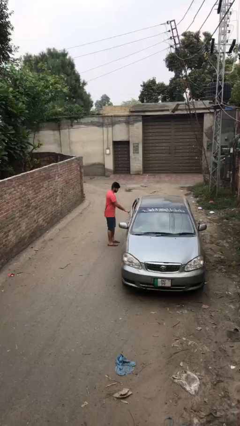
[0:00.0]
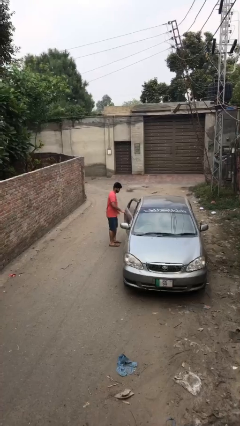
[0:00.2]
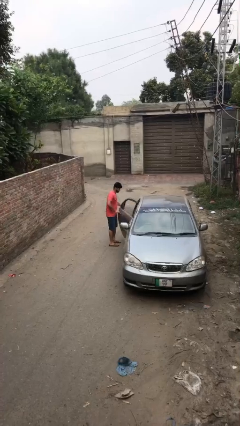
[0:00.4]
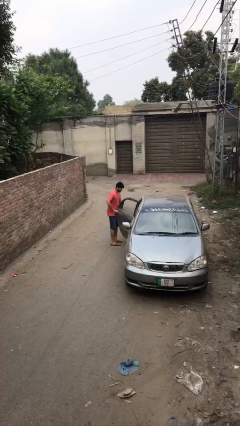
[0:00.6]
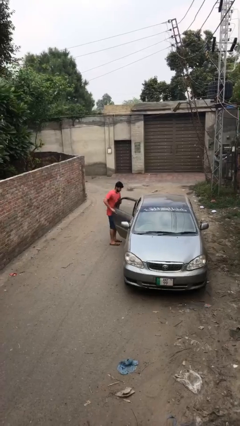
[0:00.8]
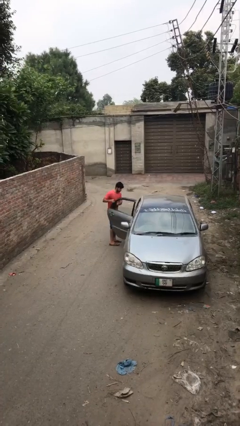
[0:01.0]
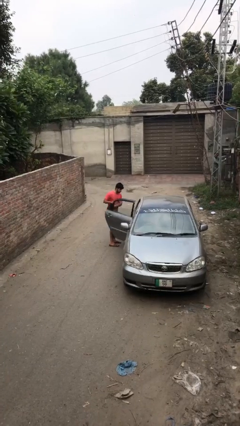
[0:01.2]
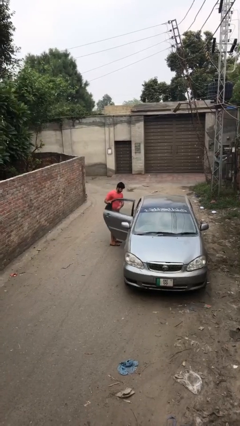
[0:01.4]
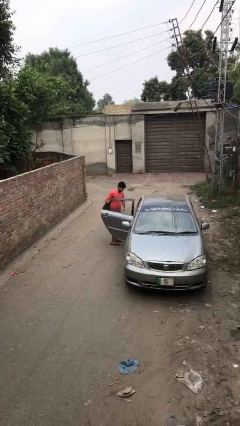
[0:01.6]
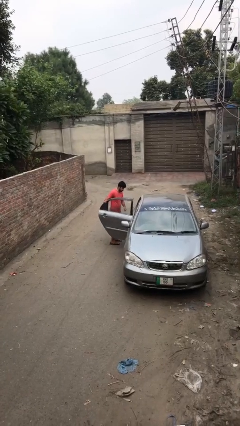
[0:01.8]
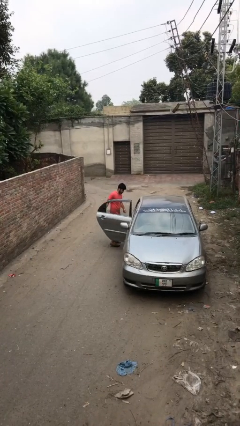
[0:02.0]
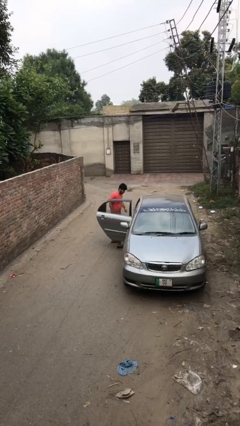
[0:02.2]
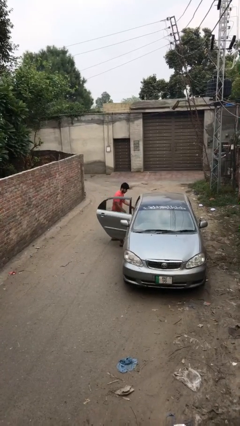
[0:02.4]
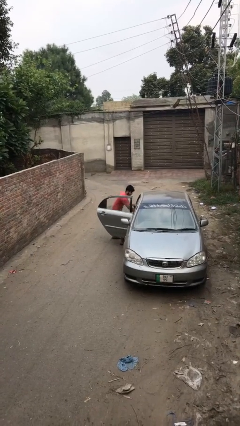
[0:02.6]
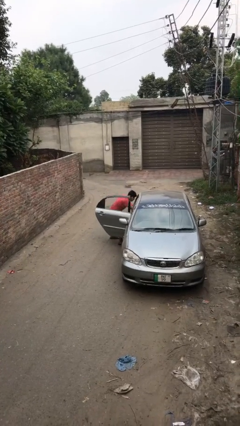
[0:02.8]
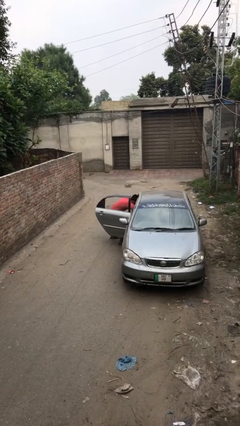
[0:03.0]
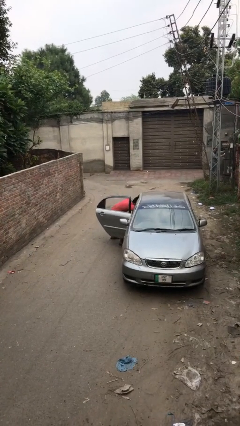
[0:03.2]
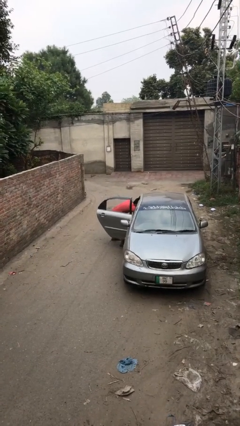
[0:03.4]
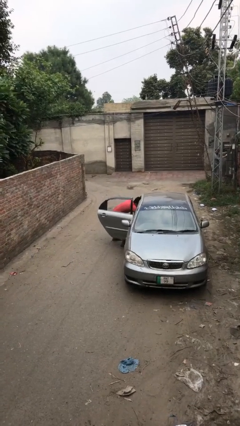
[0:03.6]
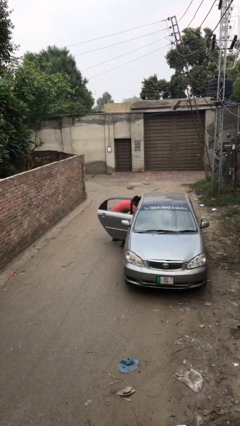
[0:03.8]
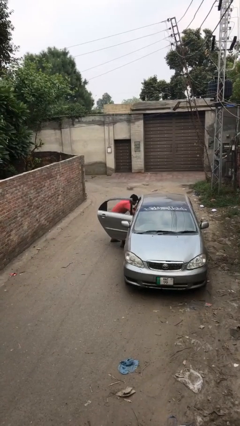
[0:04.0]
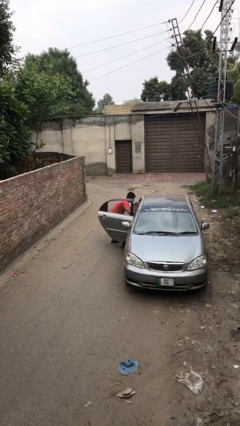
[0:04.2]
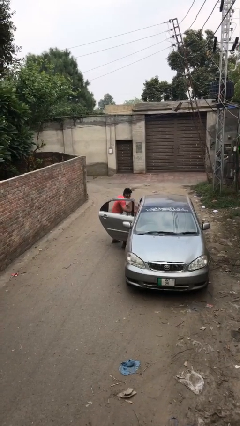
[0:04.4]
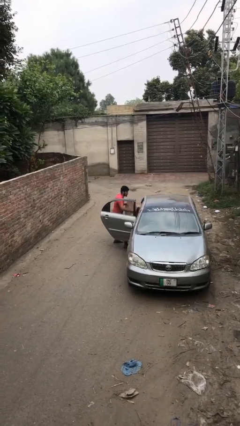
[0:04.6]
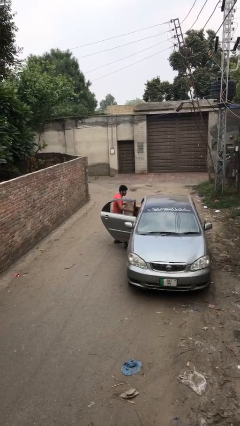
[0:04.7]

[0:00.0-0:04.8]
person opens car door

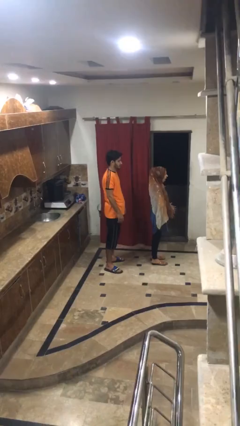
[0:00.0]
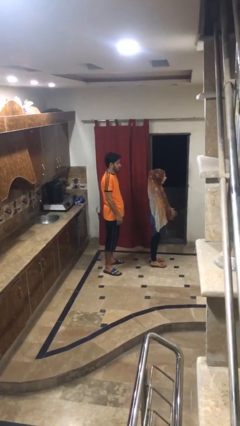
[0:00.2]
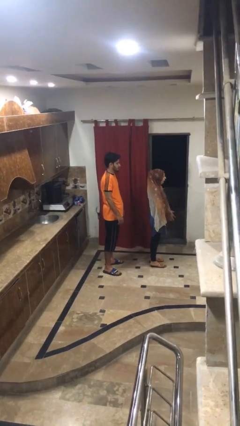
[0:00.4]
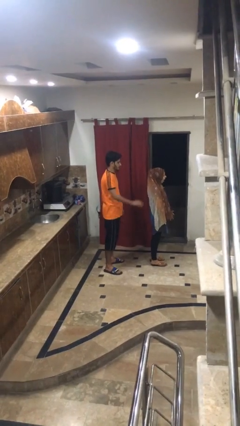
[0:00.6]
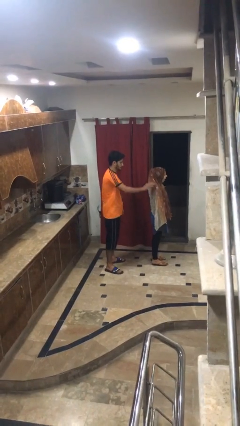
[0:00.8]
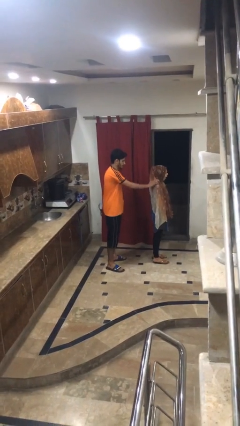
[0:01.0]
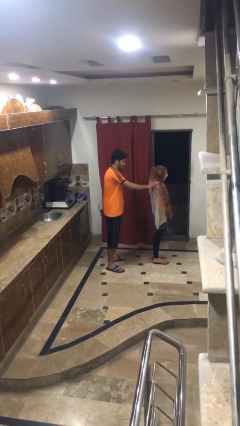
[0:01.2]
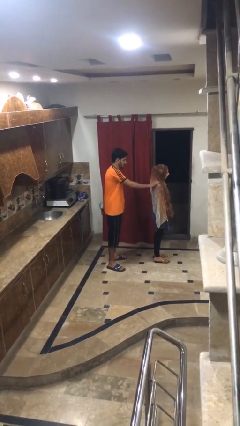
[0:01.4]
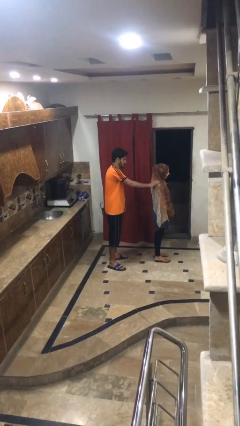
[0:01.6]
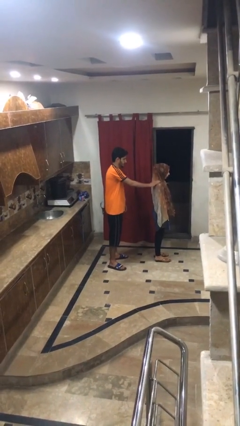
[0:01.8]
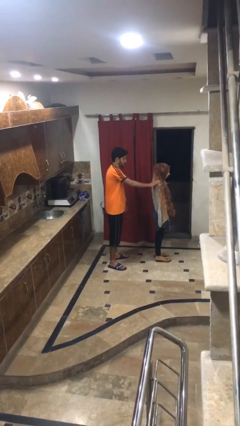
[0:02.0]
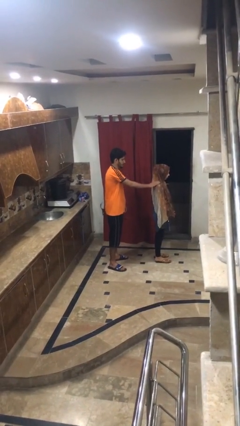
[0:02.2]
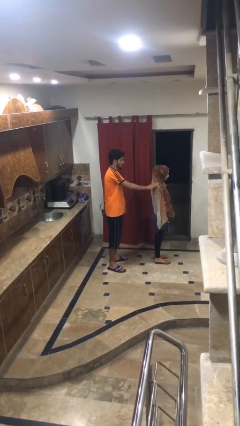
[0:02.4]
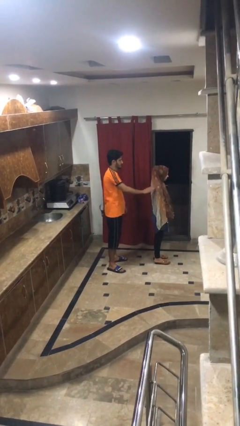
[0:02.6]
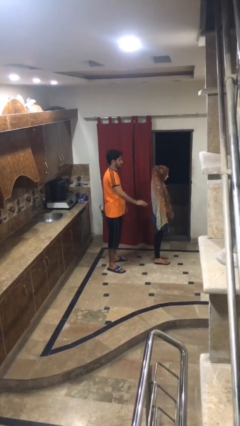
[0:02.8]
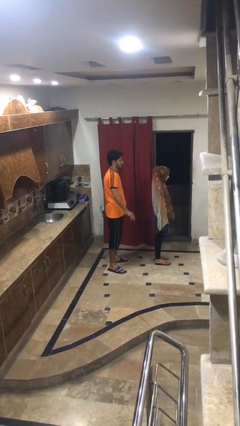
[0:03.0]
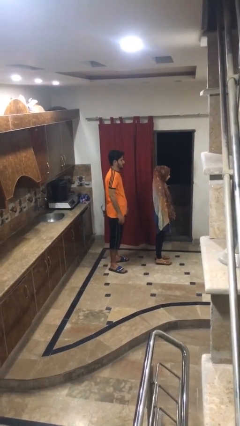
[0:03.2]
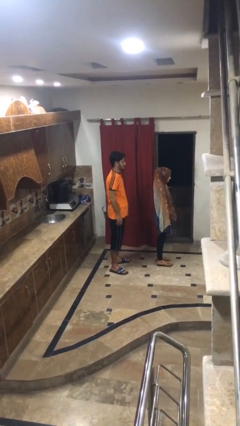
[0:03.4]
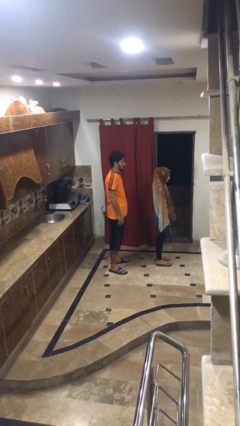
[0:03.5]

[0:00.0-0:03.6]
person touches back of person

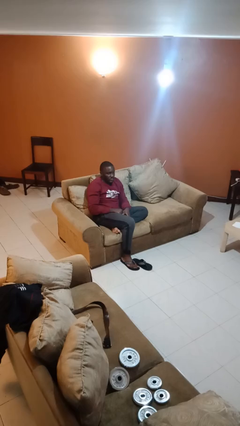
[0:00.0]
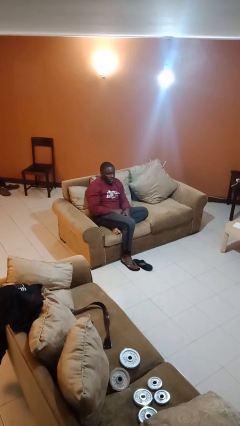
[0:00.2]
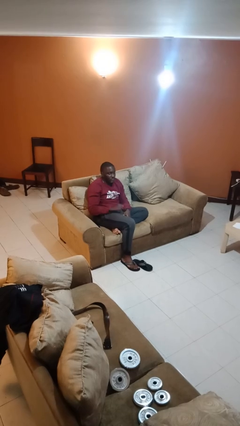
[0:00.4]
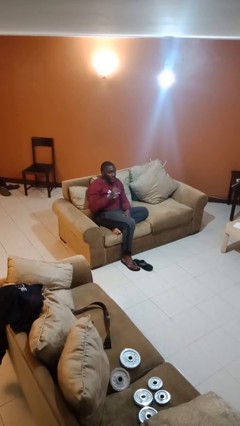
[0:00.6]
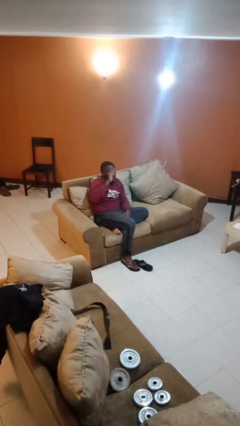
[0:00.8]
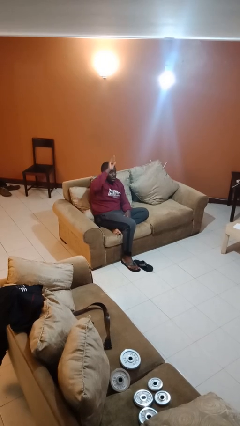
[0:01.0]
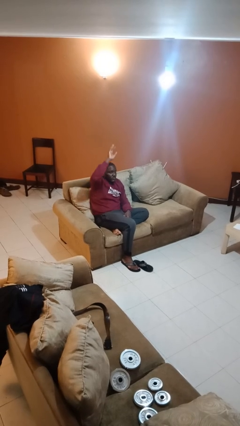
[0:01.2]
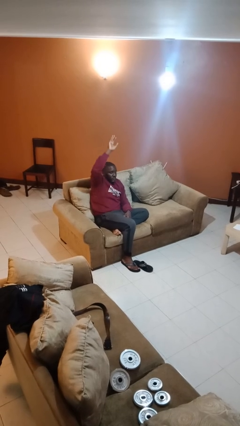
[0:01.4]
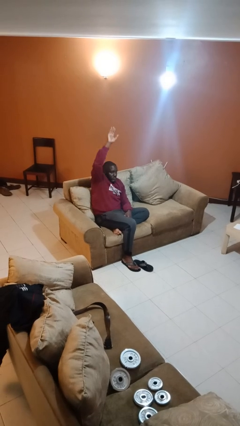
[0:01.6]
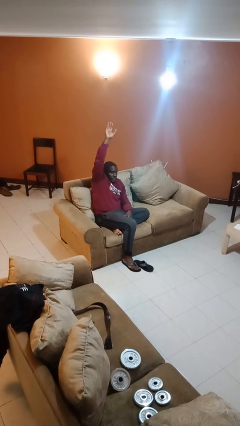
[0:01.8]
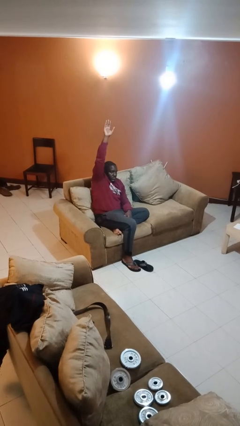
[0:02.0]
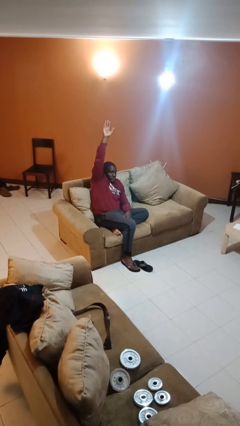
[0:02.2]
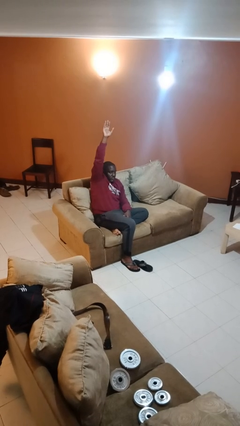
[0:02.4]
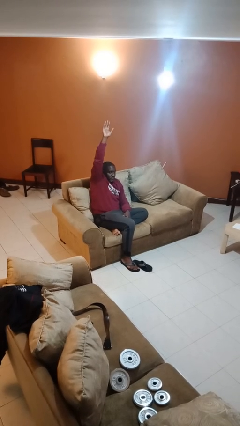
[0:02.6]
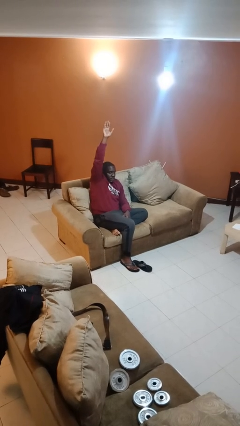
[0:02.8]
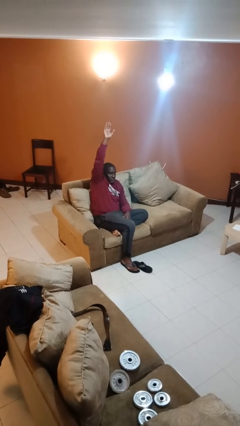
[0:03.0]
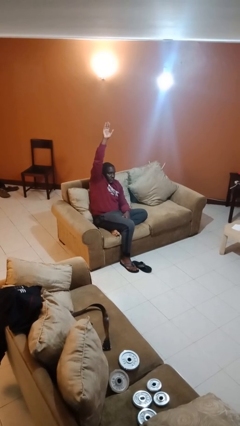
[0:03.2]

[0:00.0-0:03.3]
person gestures raise hand

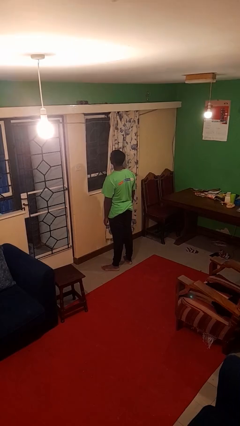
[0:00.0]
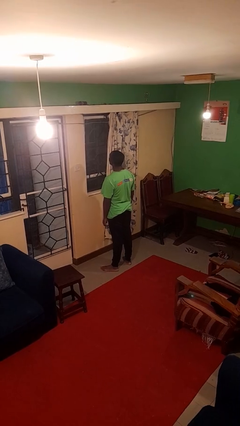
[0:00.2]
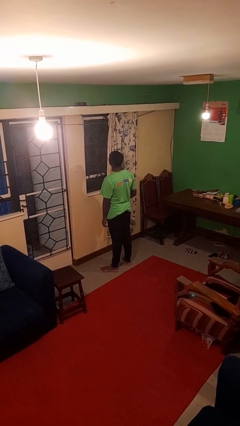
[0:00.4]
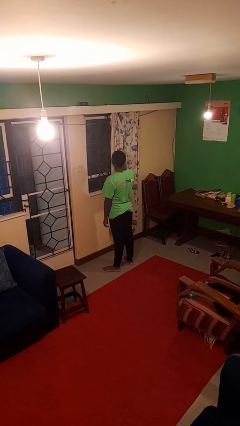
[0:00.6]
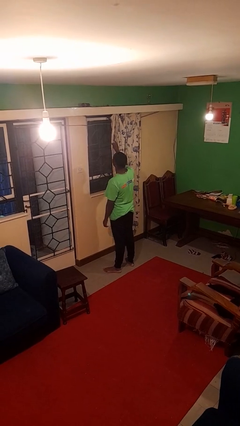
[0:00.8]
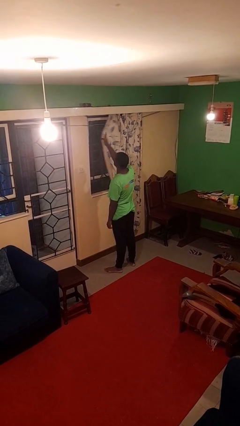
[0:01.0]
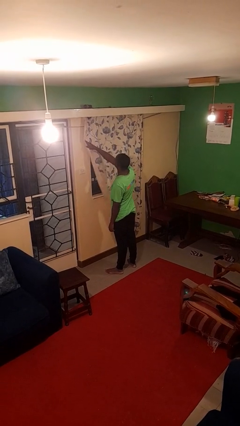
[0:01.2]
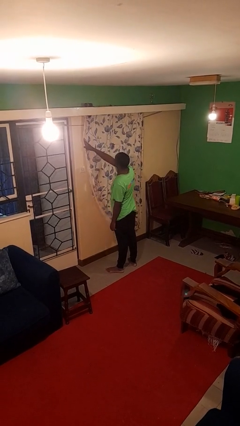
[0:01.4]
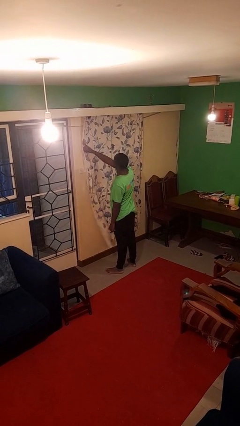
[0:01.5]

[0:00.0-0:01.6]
person closes curtains

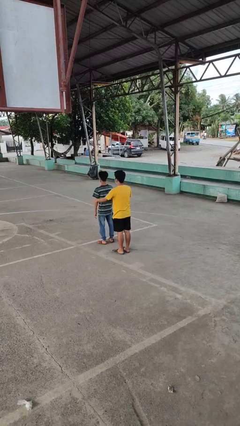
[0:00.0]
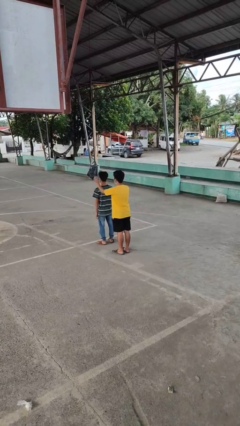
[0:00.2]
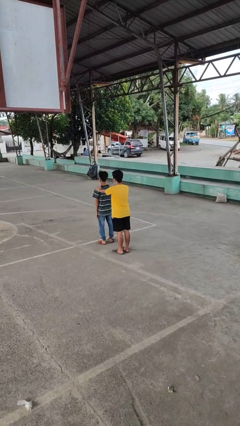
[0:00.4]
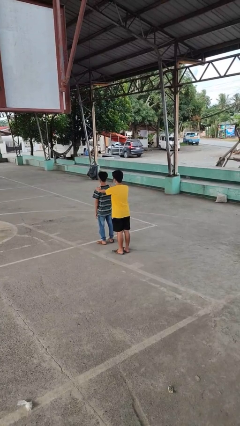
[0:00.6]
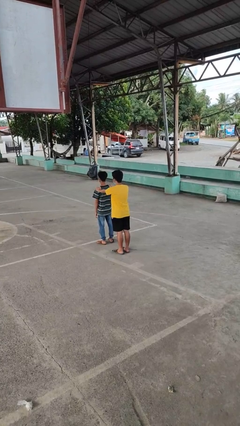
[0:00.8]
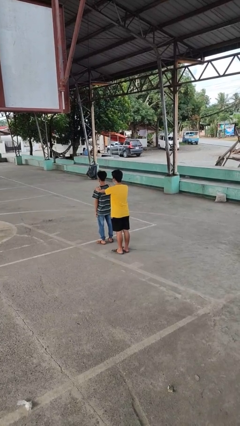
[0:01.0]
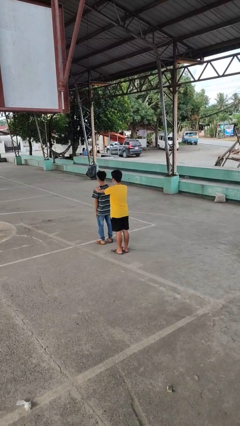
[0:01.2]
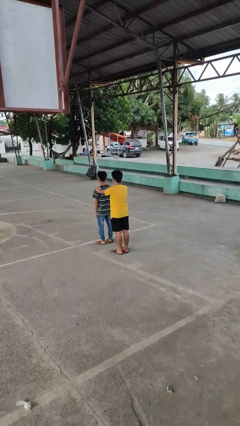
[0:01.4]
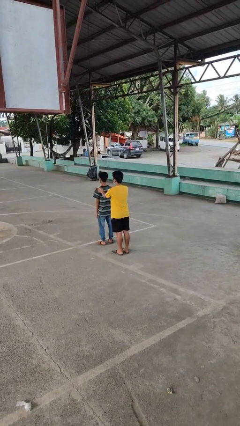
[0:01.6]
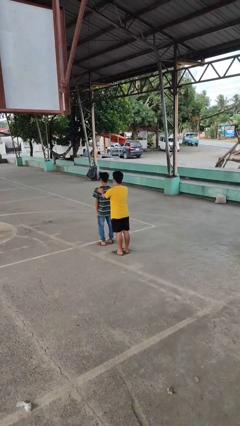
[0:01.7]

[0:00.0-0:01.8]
person grabs person by shoulder

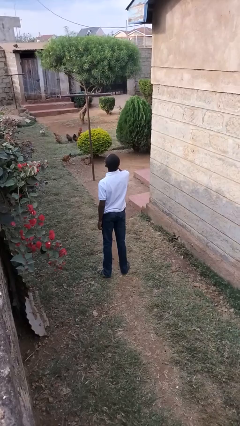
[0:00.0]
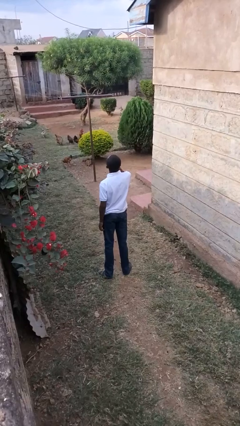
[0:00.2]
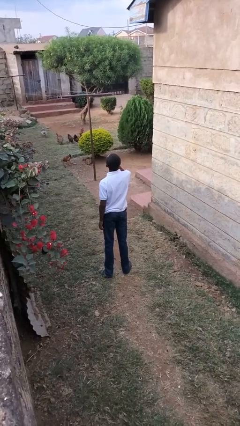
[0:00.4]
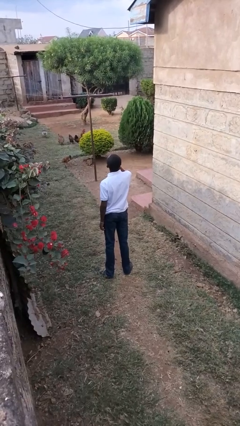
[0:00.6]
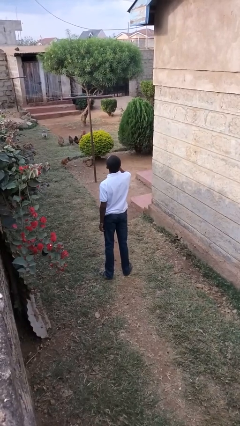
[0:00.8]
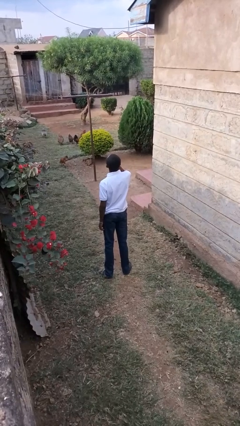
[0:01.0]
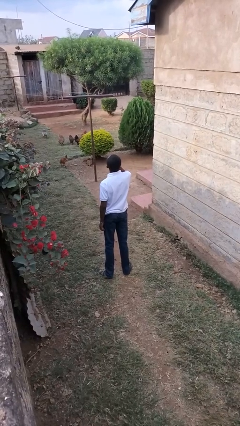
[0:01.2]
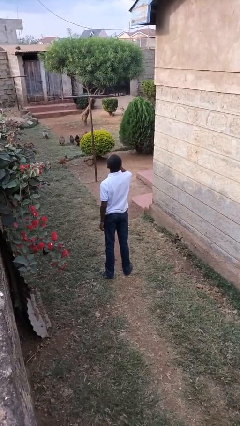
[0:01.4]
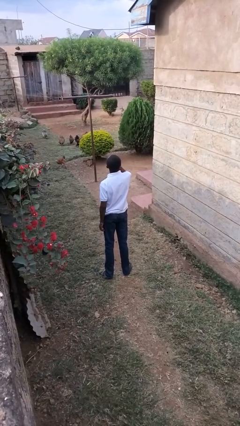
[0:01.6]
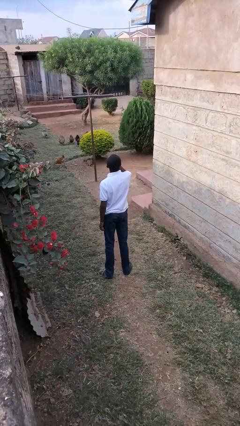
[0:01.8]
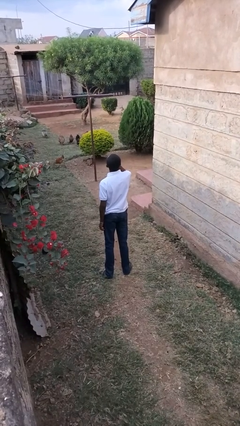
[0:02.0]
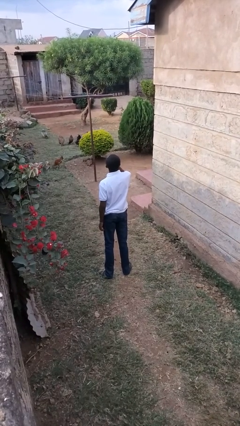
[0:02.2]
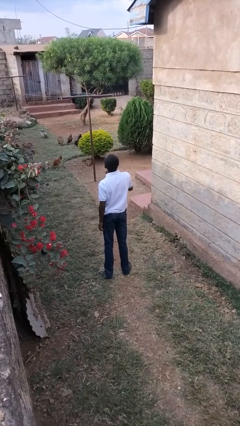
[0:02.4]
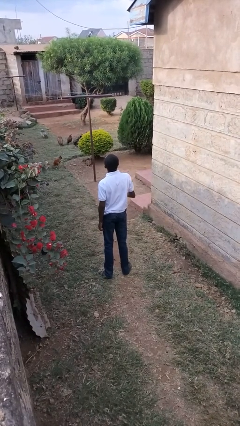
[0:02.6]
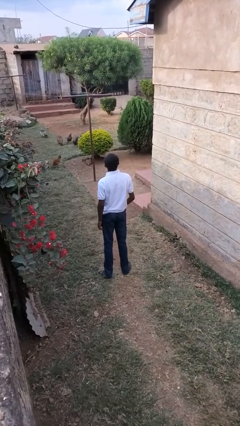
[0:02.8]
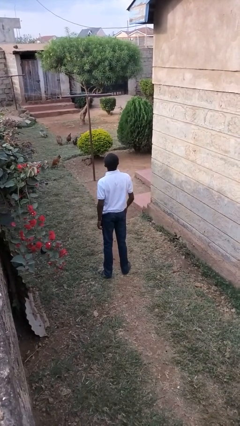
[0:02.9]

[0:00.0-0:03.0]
person licks fingers
